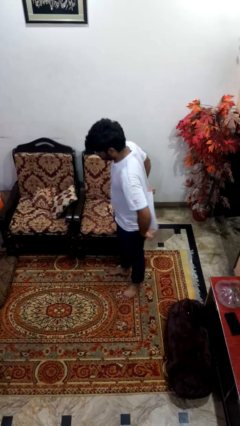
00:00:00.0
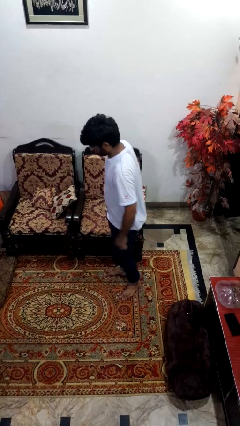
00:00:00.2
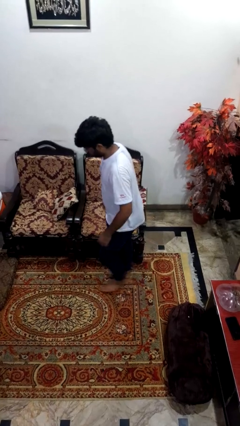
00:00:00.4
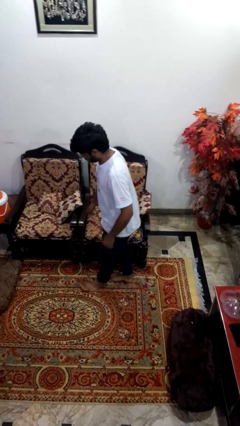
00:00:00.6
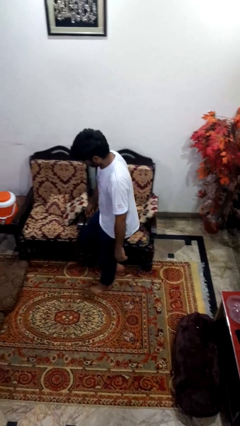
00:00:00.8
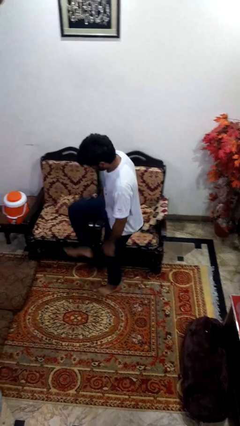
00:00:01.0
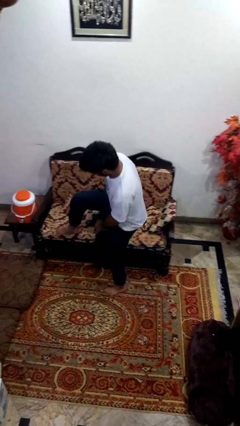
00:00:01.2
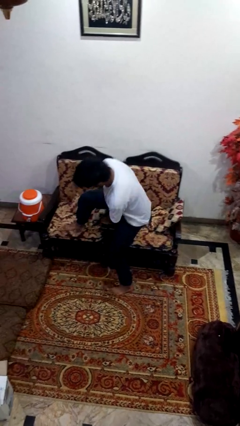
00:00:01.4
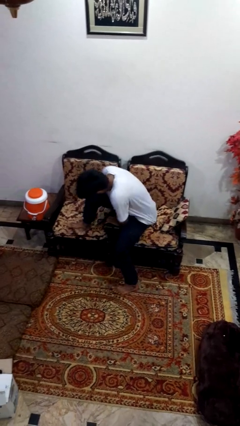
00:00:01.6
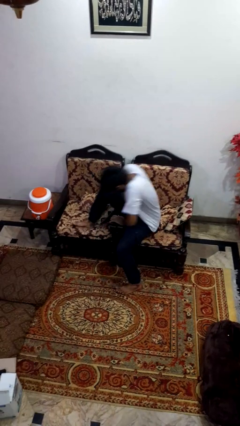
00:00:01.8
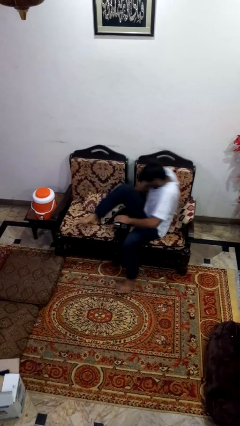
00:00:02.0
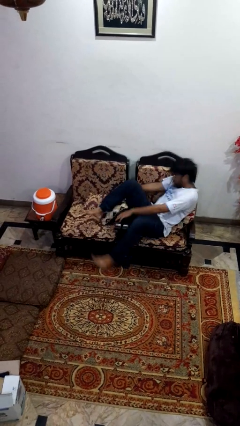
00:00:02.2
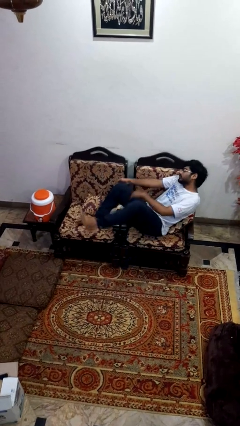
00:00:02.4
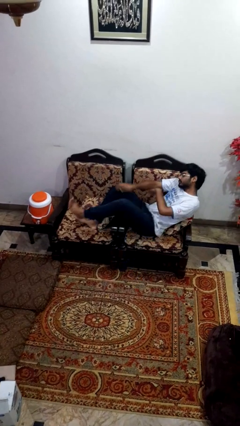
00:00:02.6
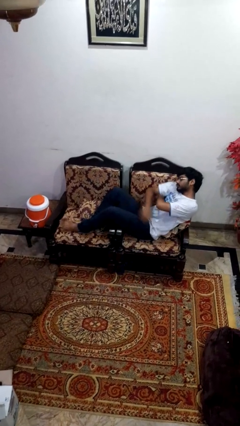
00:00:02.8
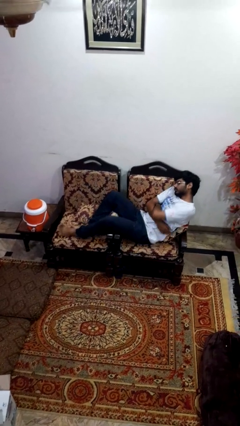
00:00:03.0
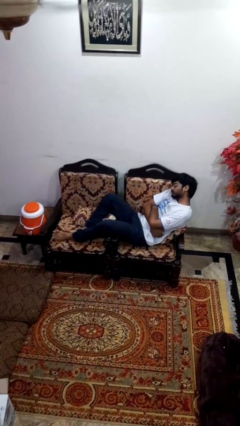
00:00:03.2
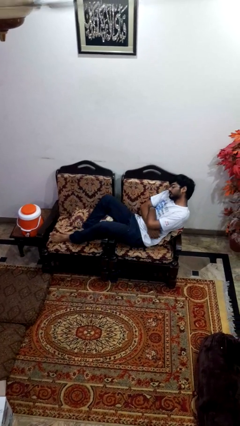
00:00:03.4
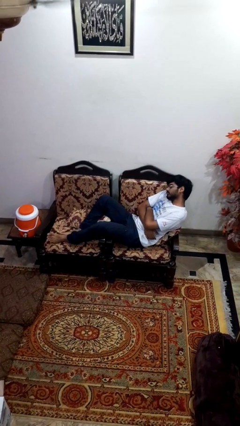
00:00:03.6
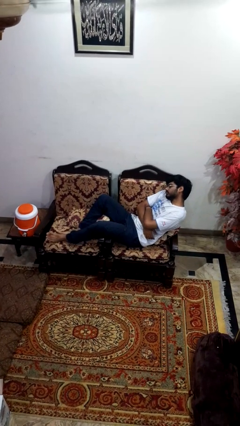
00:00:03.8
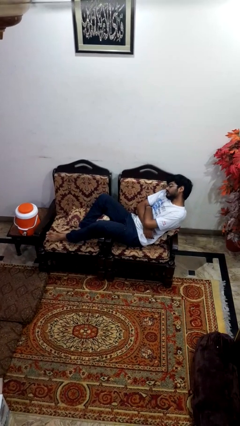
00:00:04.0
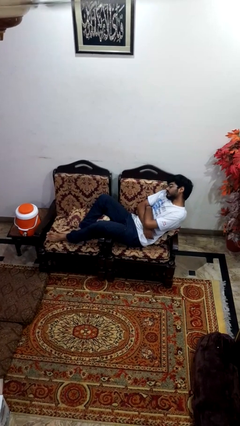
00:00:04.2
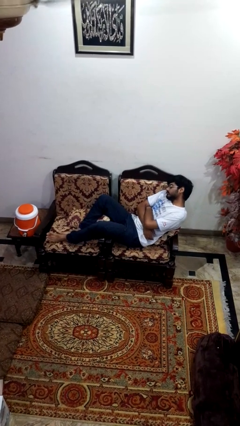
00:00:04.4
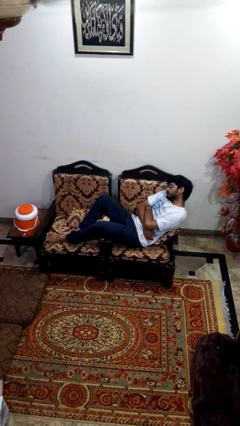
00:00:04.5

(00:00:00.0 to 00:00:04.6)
person lies down on couch

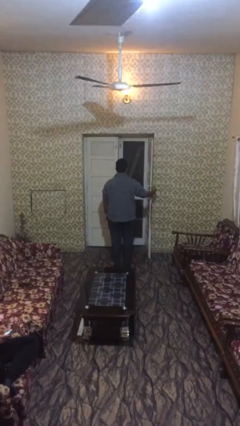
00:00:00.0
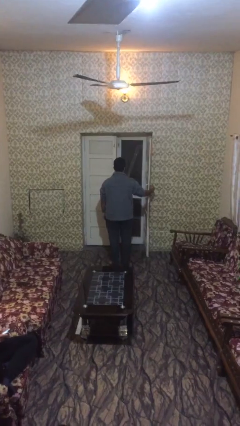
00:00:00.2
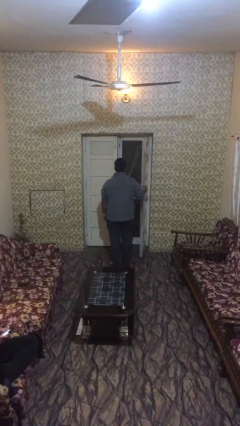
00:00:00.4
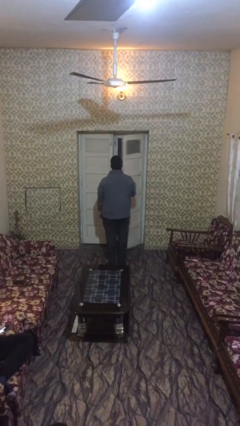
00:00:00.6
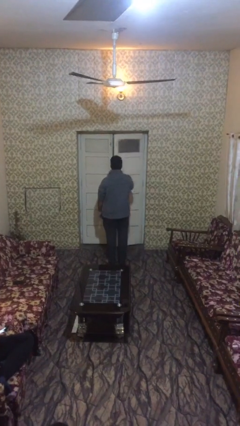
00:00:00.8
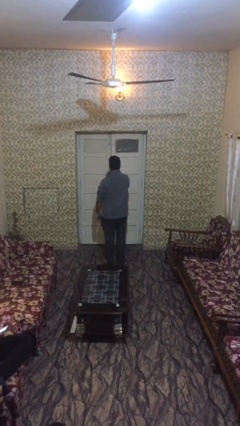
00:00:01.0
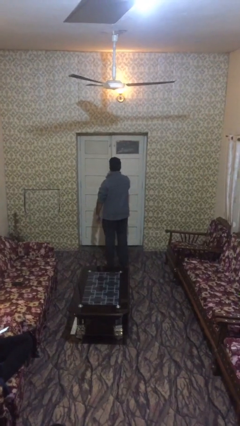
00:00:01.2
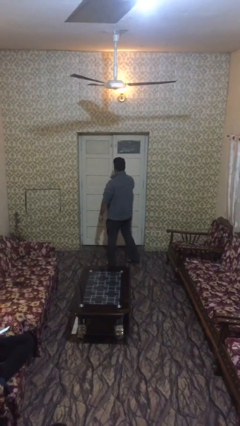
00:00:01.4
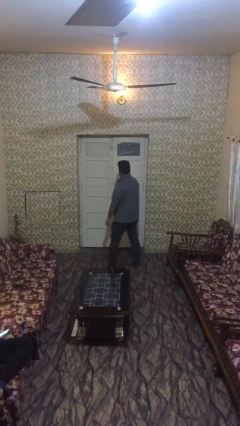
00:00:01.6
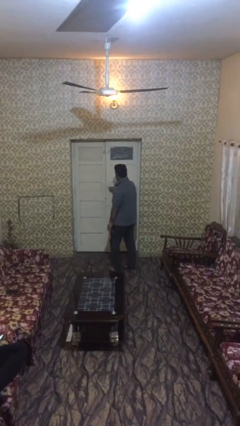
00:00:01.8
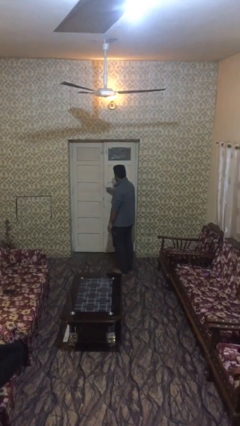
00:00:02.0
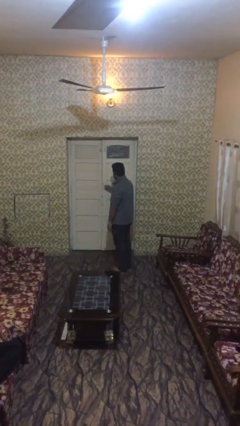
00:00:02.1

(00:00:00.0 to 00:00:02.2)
person closes facility door

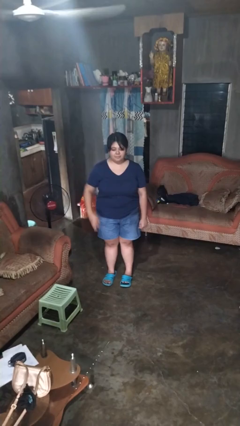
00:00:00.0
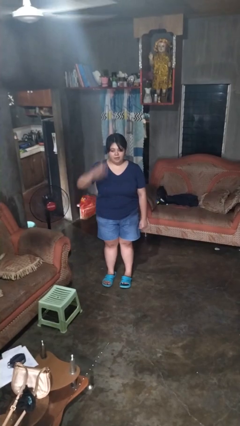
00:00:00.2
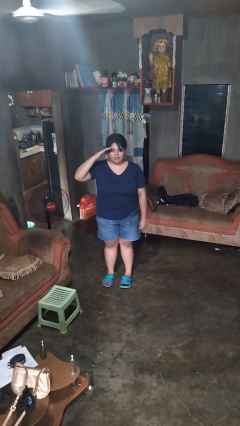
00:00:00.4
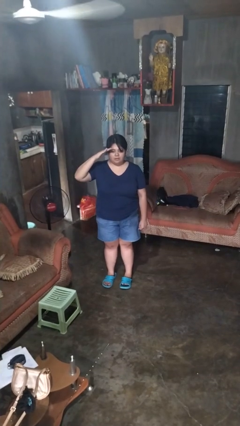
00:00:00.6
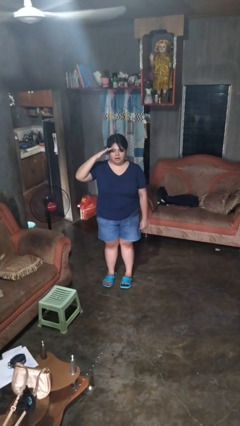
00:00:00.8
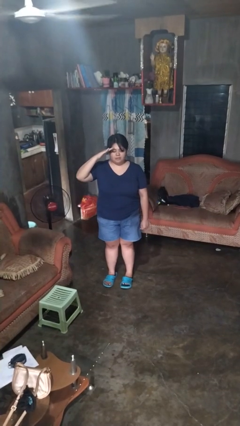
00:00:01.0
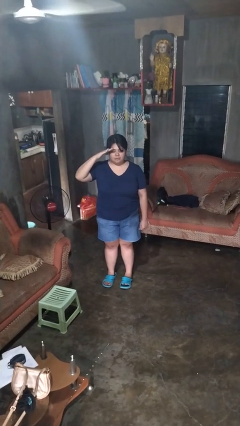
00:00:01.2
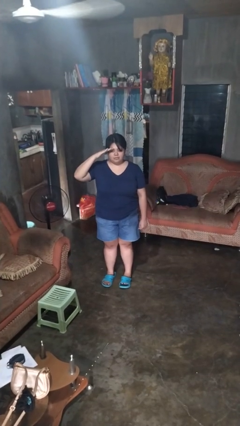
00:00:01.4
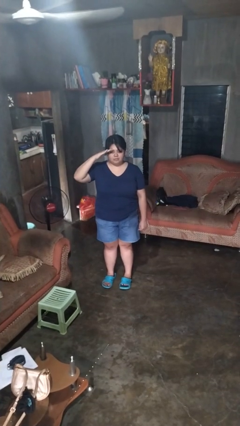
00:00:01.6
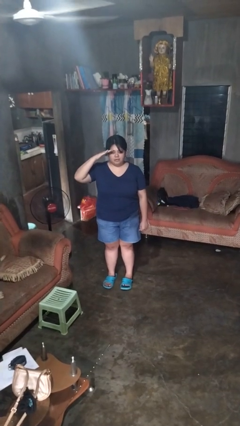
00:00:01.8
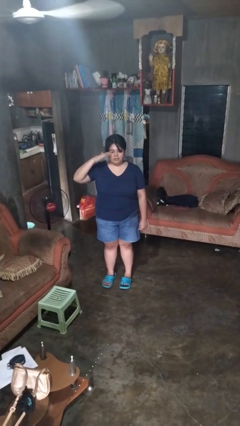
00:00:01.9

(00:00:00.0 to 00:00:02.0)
person salutes

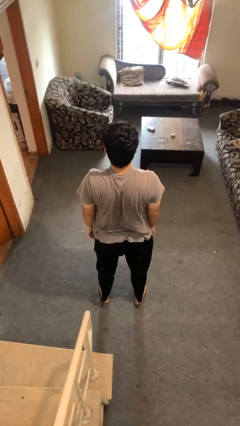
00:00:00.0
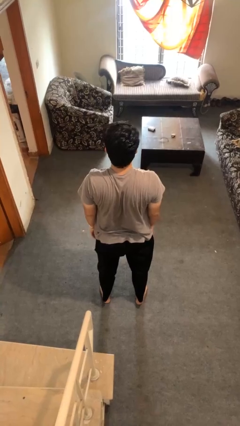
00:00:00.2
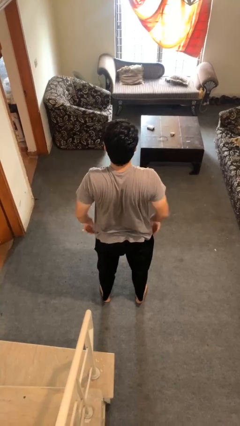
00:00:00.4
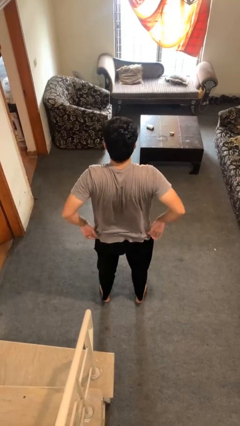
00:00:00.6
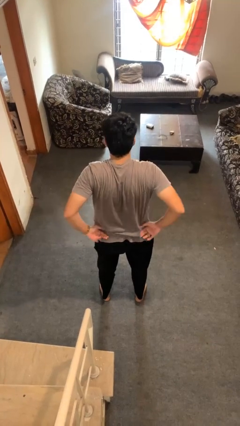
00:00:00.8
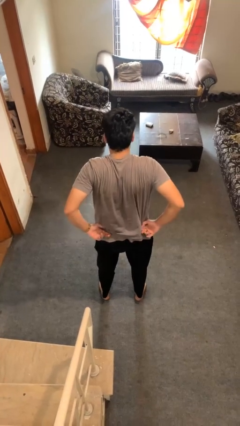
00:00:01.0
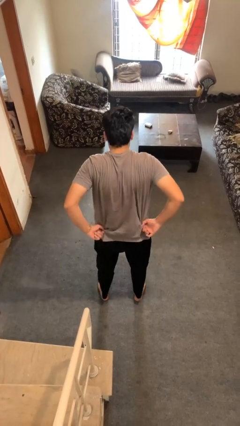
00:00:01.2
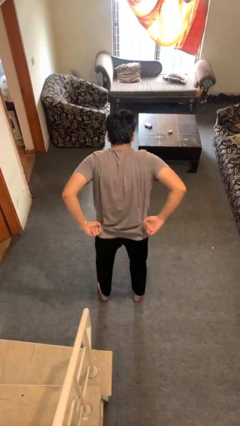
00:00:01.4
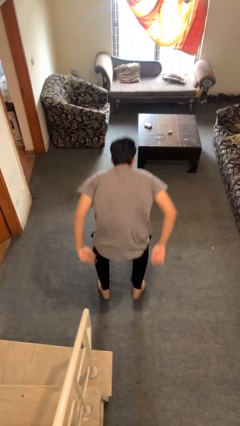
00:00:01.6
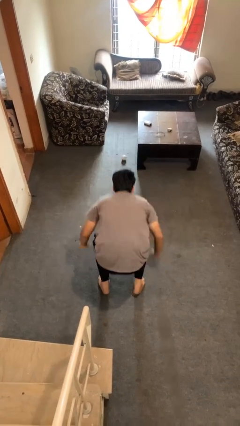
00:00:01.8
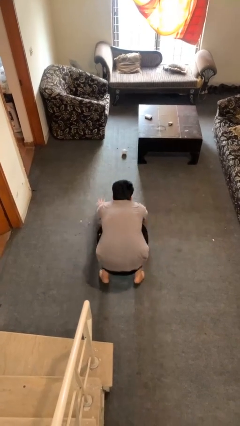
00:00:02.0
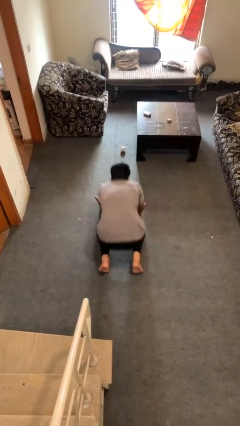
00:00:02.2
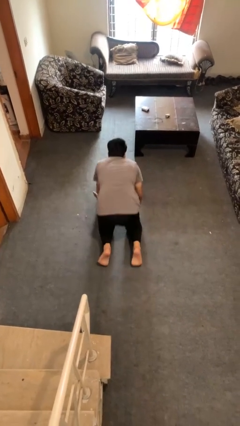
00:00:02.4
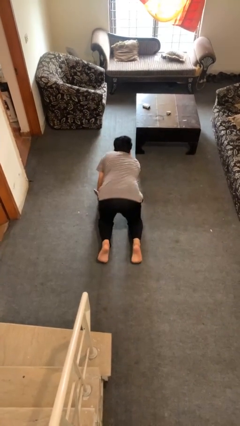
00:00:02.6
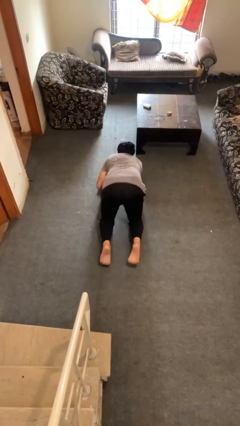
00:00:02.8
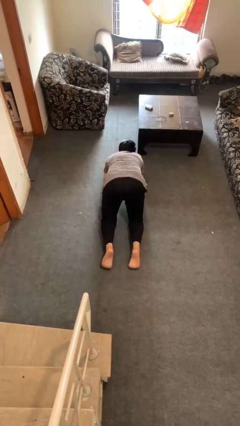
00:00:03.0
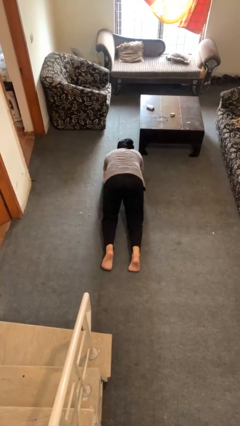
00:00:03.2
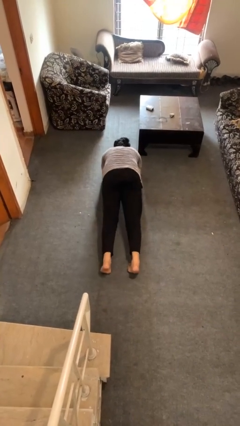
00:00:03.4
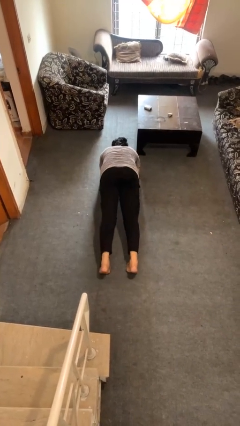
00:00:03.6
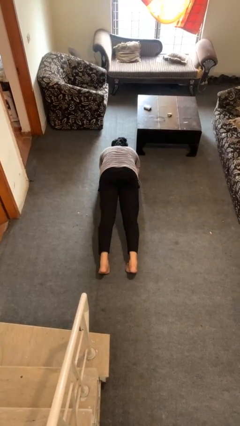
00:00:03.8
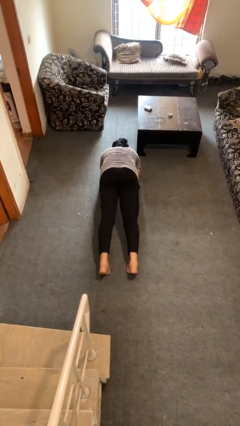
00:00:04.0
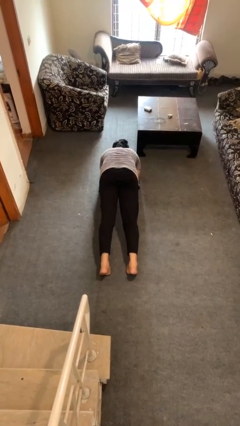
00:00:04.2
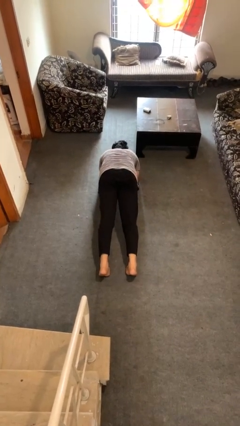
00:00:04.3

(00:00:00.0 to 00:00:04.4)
person exercises with plank

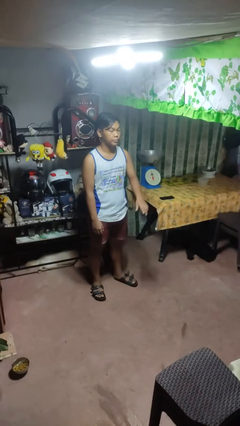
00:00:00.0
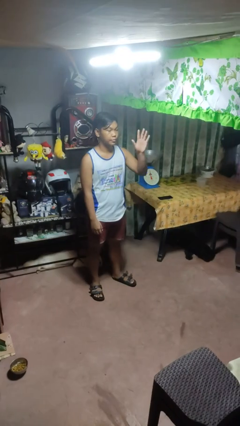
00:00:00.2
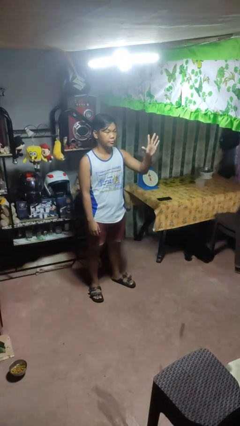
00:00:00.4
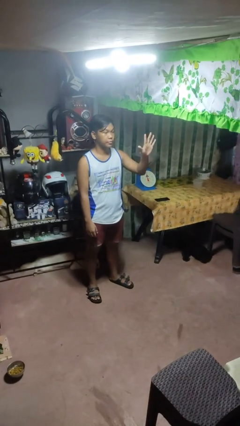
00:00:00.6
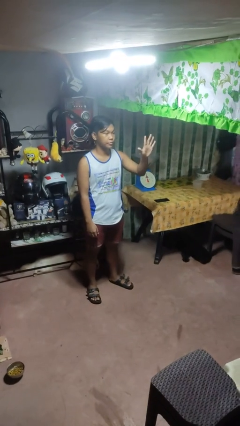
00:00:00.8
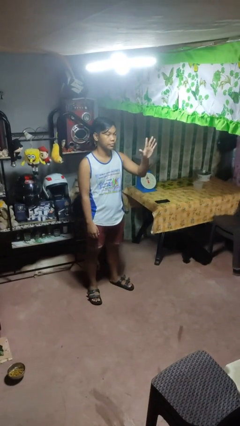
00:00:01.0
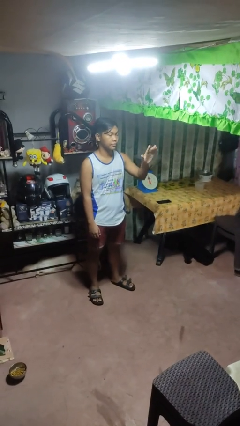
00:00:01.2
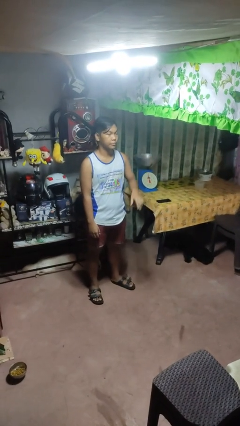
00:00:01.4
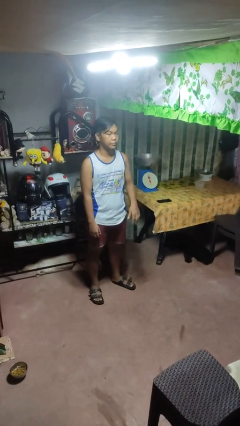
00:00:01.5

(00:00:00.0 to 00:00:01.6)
person gestures number five

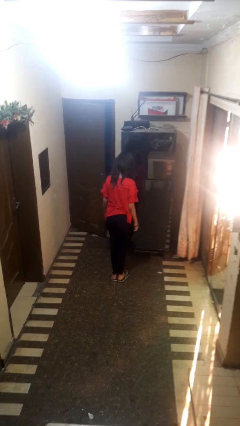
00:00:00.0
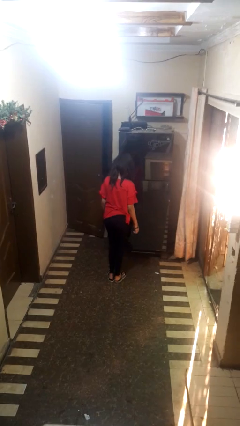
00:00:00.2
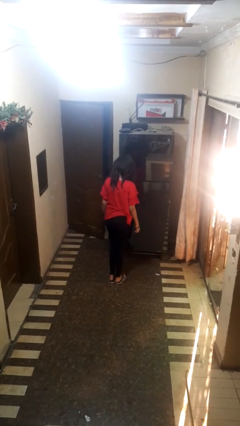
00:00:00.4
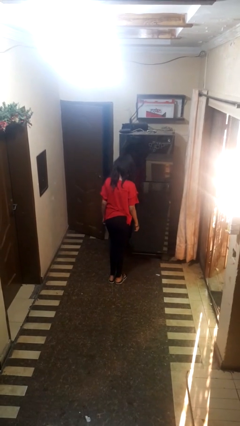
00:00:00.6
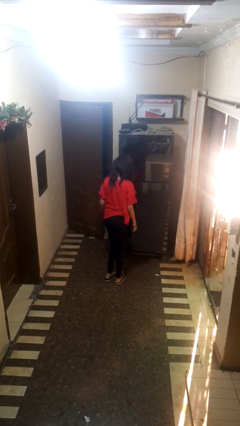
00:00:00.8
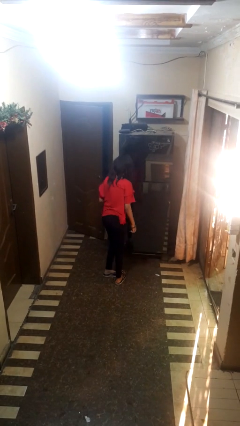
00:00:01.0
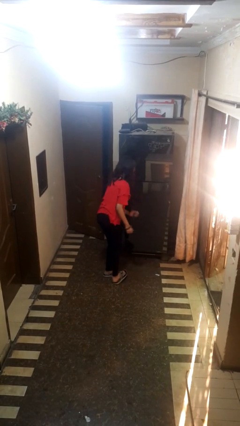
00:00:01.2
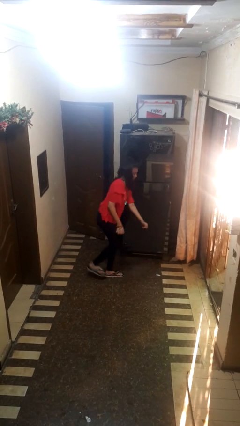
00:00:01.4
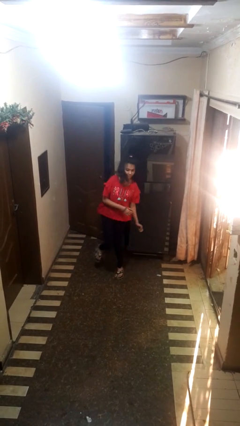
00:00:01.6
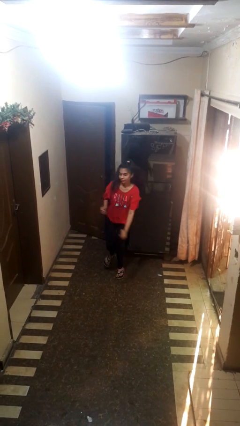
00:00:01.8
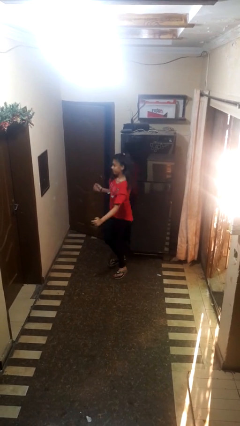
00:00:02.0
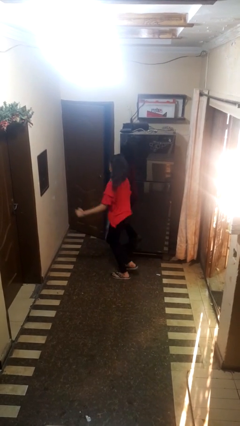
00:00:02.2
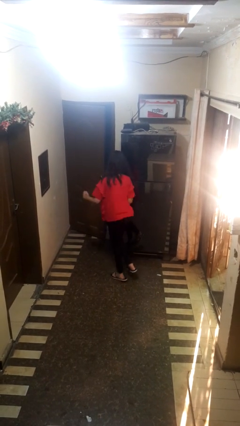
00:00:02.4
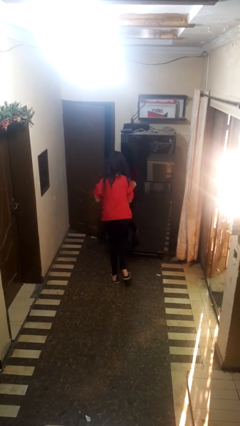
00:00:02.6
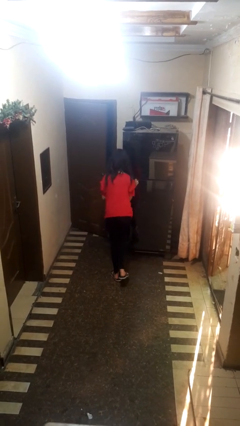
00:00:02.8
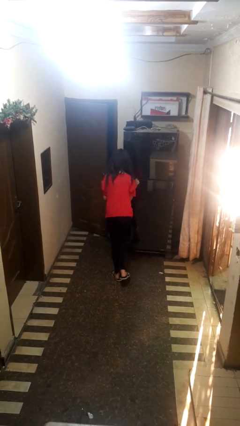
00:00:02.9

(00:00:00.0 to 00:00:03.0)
person twirls
